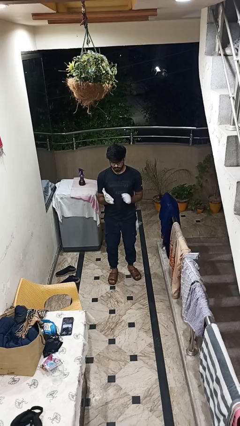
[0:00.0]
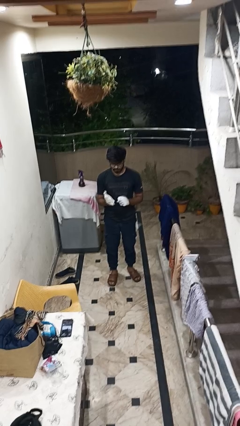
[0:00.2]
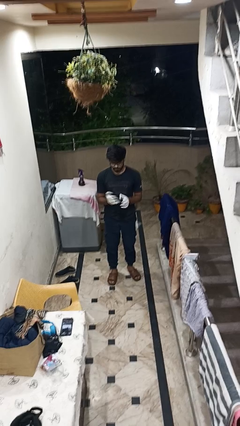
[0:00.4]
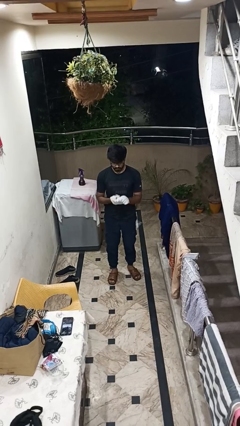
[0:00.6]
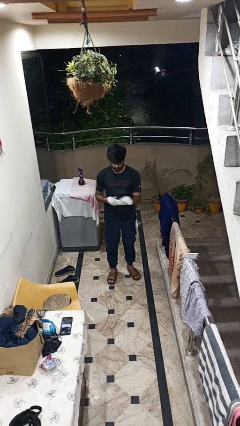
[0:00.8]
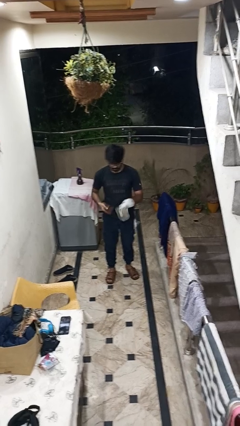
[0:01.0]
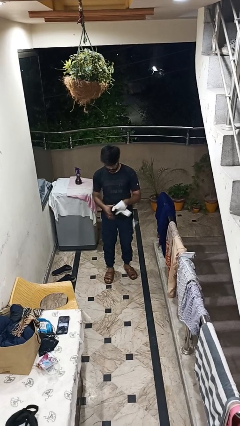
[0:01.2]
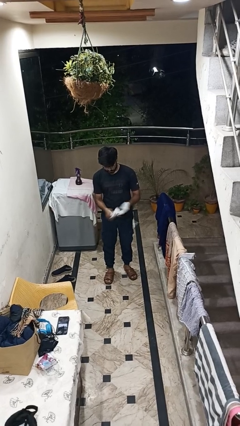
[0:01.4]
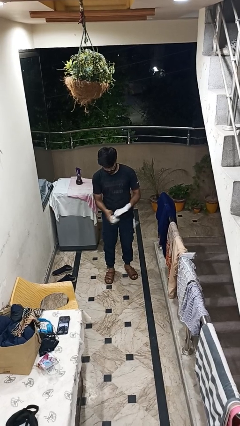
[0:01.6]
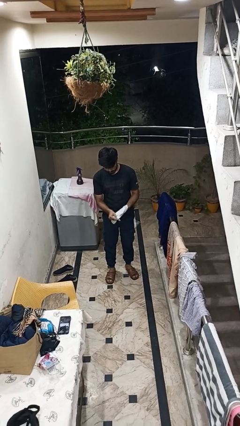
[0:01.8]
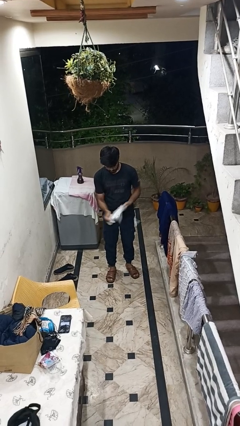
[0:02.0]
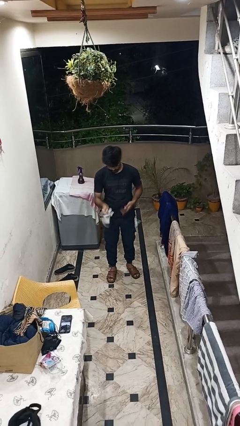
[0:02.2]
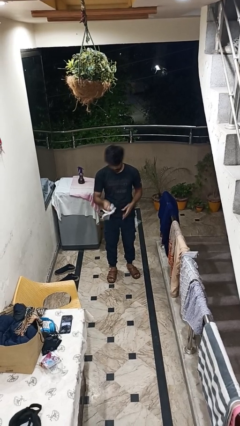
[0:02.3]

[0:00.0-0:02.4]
person takes off gloves

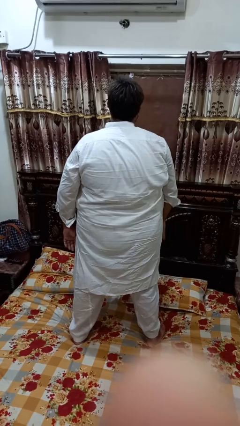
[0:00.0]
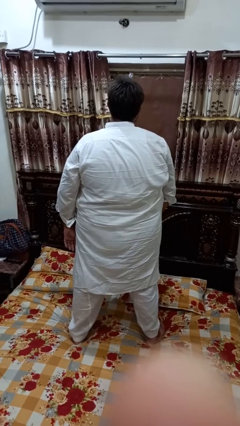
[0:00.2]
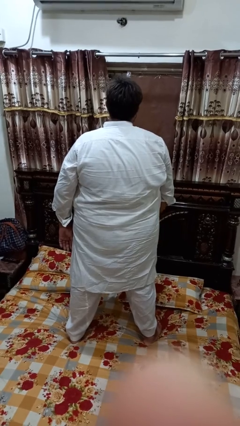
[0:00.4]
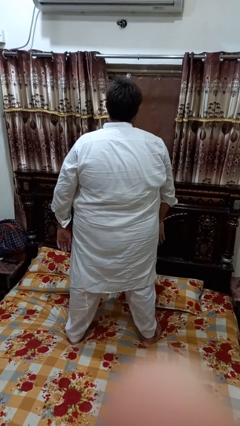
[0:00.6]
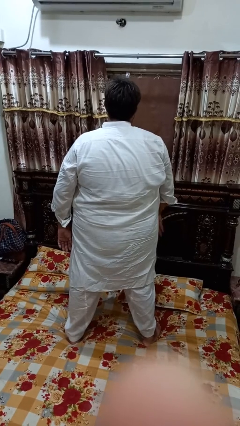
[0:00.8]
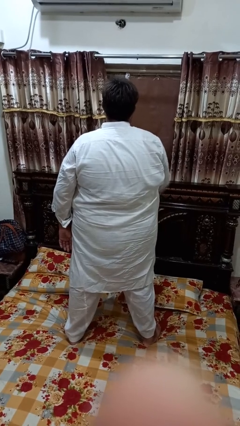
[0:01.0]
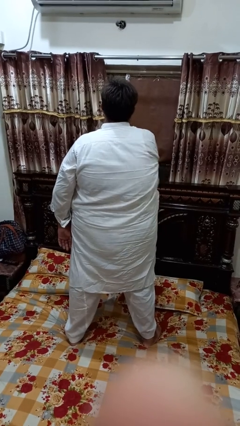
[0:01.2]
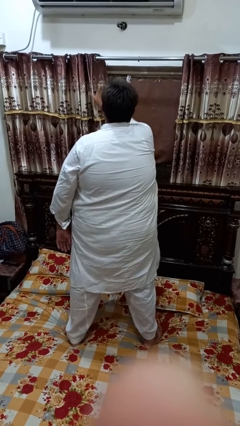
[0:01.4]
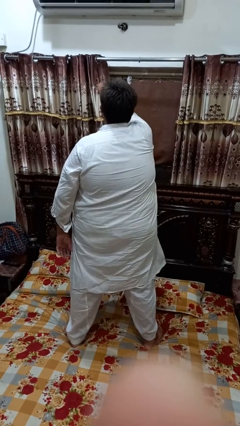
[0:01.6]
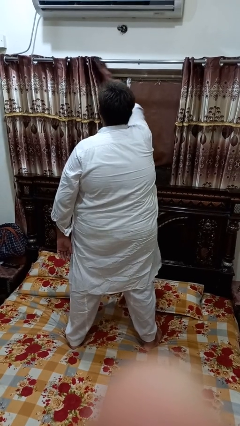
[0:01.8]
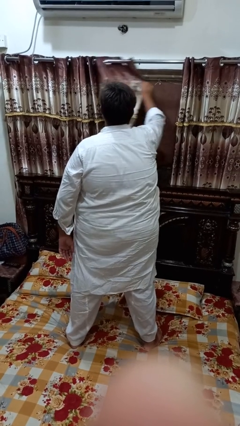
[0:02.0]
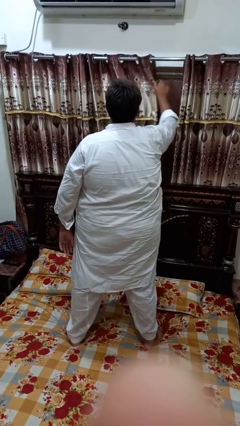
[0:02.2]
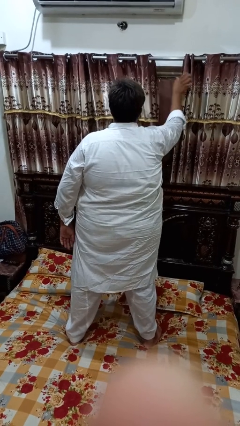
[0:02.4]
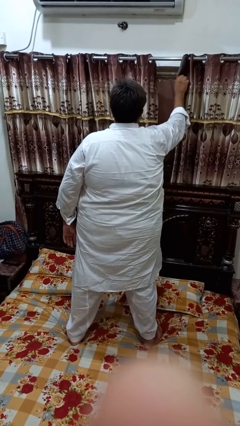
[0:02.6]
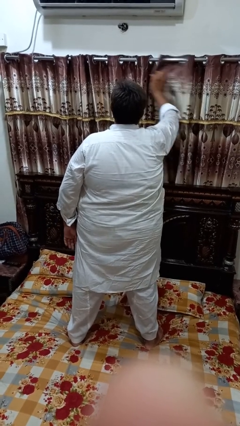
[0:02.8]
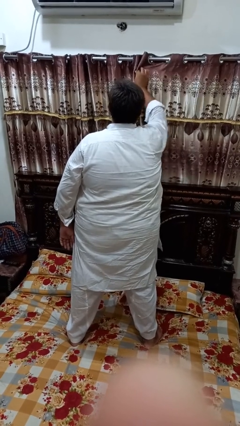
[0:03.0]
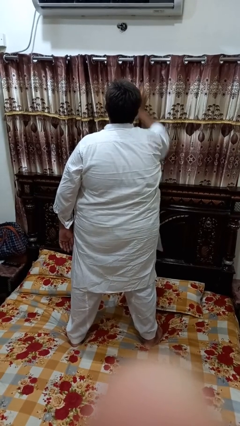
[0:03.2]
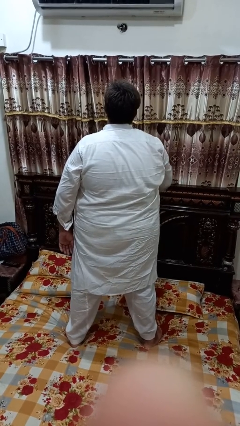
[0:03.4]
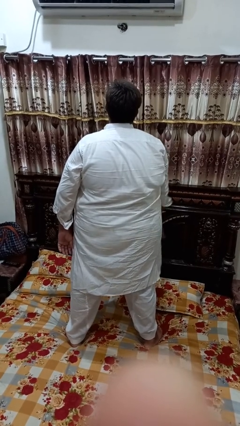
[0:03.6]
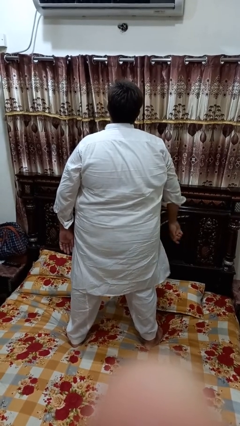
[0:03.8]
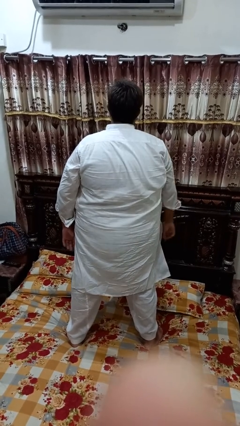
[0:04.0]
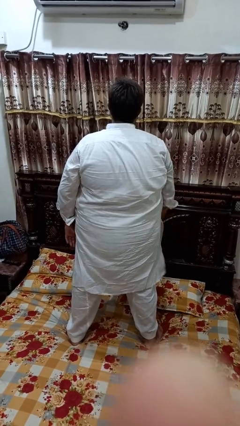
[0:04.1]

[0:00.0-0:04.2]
person closes curtains

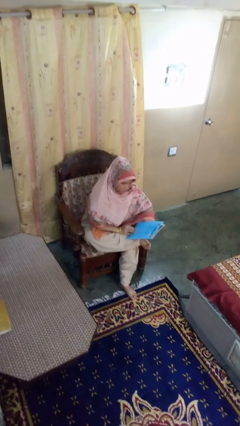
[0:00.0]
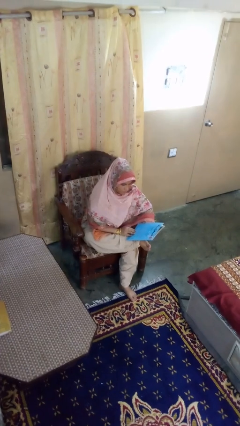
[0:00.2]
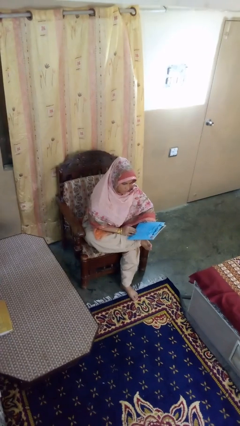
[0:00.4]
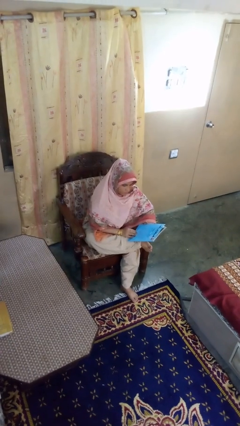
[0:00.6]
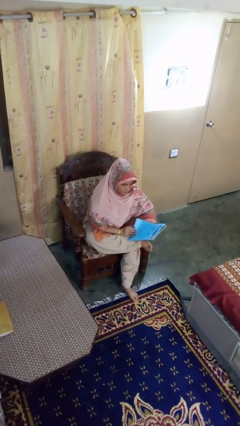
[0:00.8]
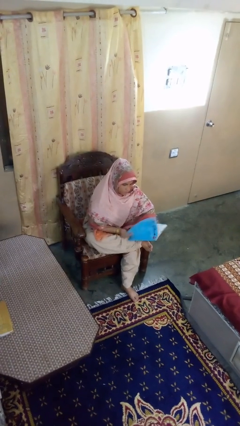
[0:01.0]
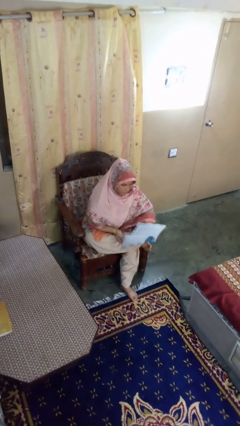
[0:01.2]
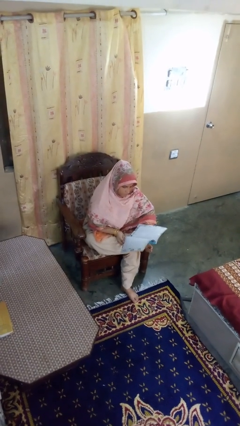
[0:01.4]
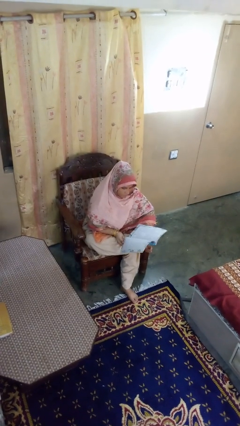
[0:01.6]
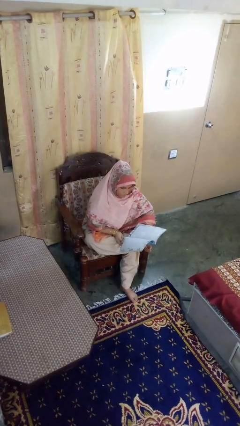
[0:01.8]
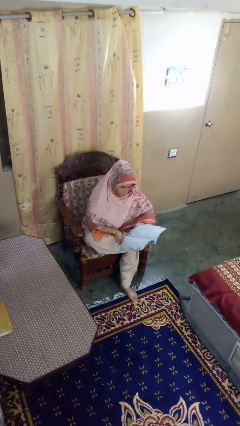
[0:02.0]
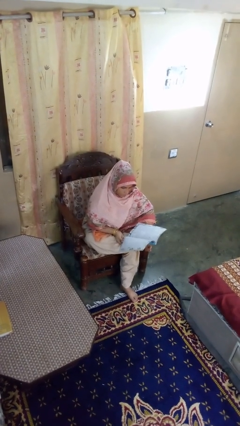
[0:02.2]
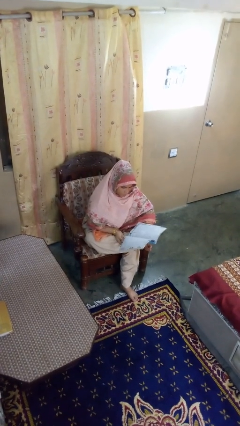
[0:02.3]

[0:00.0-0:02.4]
person reads magazine

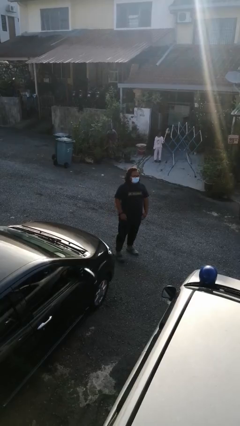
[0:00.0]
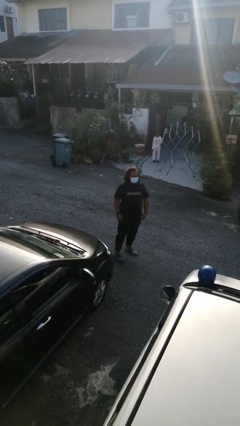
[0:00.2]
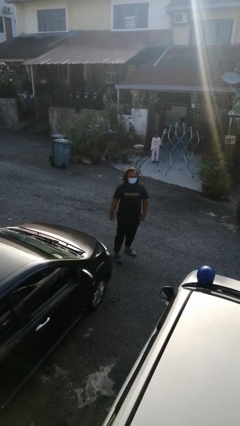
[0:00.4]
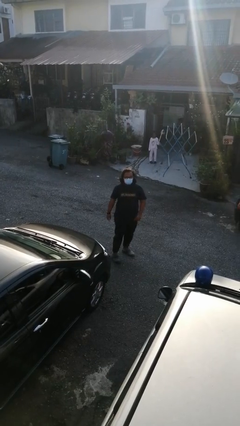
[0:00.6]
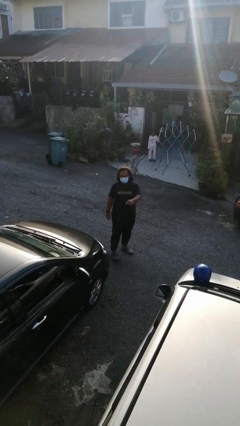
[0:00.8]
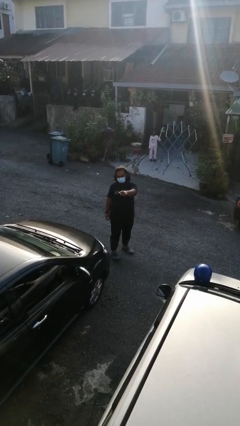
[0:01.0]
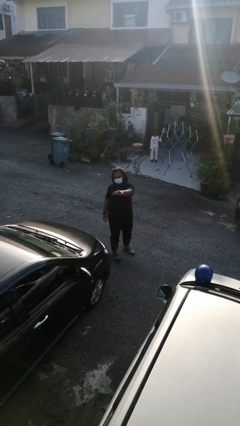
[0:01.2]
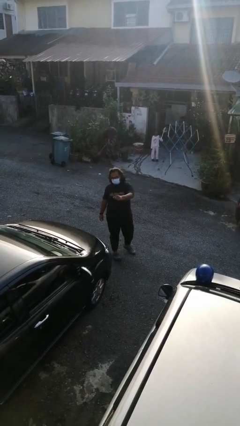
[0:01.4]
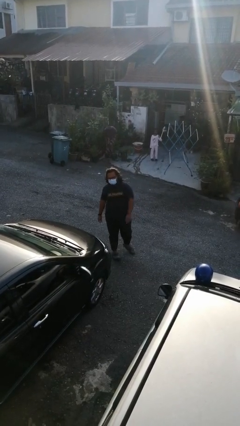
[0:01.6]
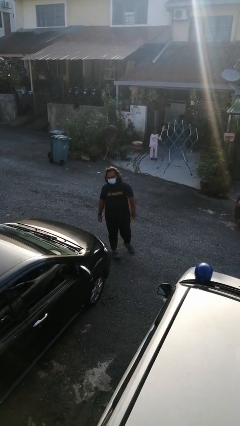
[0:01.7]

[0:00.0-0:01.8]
person points at person

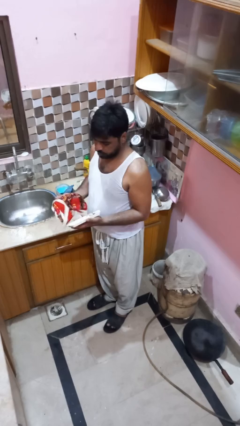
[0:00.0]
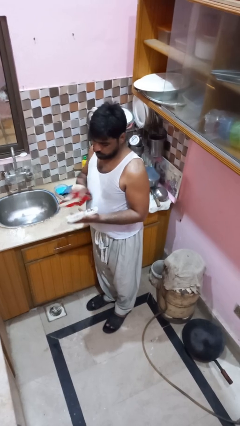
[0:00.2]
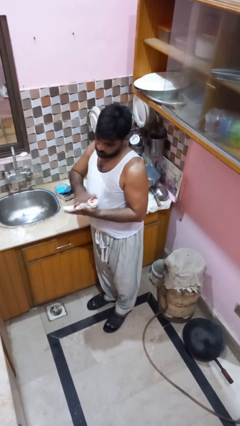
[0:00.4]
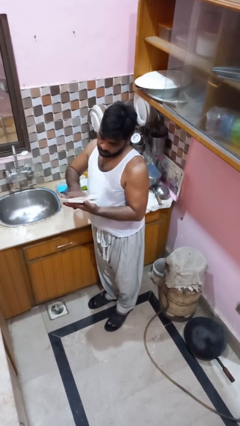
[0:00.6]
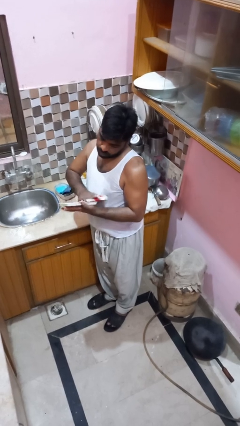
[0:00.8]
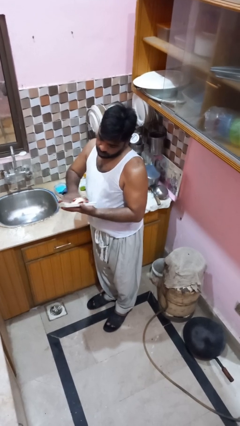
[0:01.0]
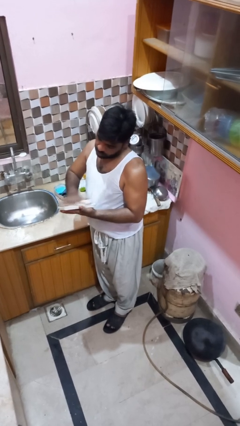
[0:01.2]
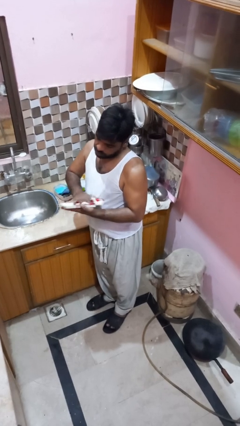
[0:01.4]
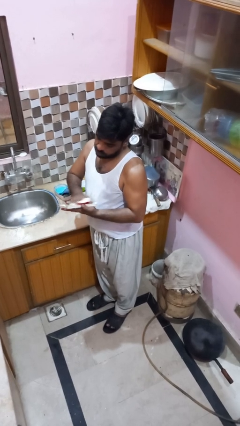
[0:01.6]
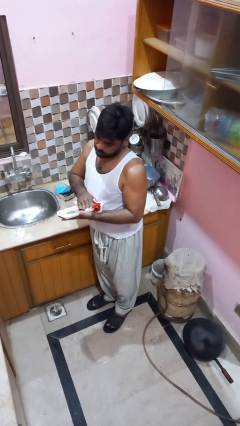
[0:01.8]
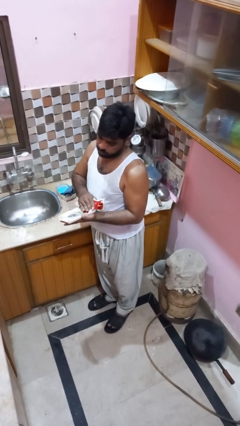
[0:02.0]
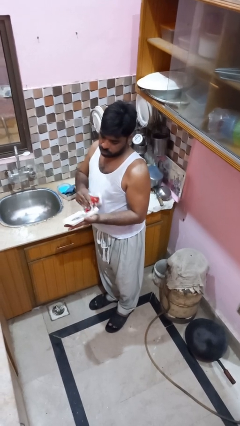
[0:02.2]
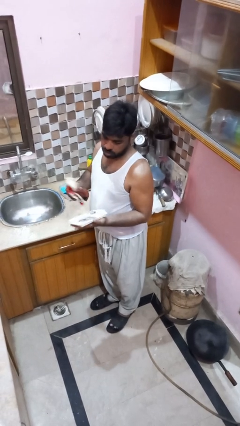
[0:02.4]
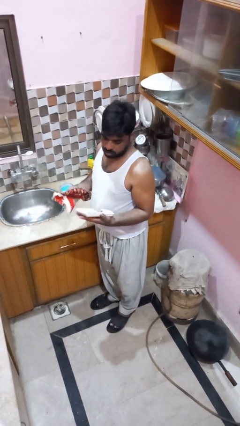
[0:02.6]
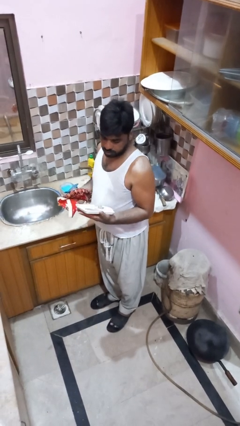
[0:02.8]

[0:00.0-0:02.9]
person dries dish

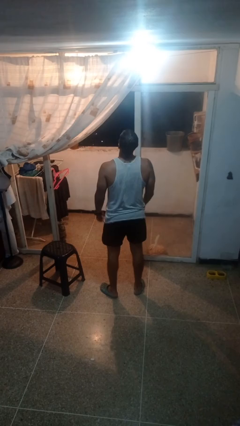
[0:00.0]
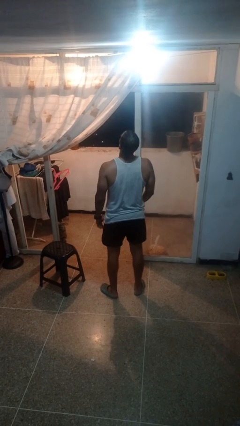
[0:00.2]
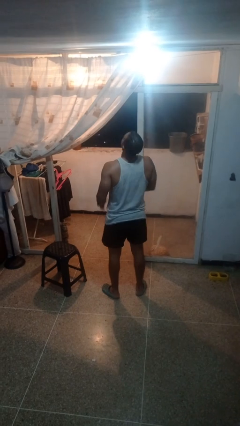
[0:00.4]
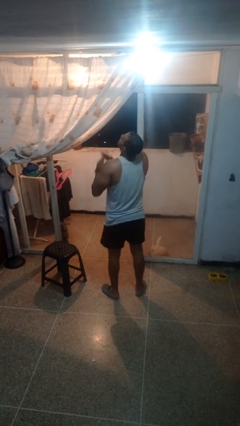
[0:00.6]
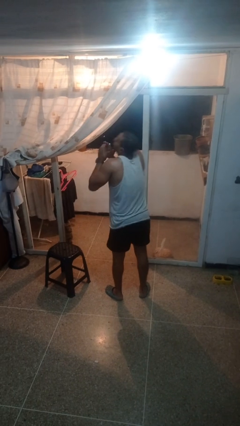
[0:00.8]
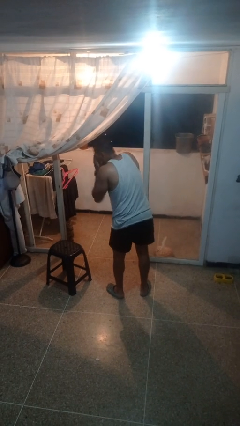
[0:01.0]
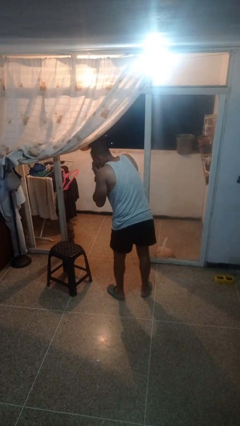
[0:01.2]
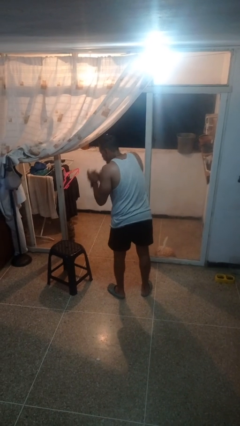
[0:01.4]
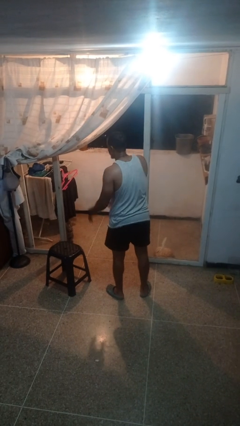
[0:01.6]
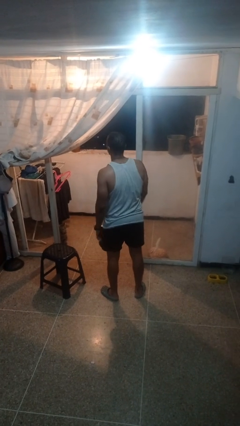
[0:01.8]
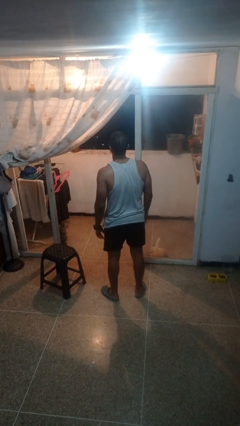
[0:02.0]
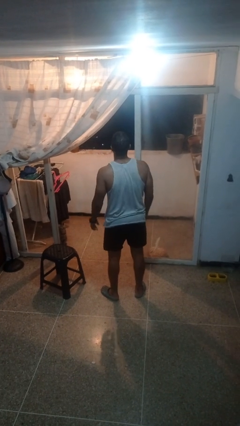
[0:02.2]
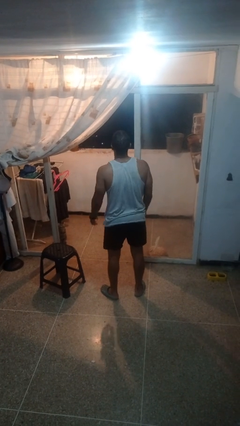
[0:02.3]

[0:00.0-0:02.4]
person sneezes into hand

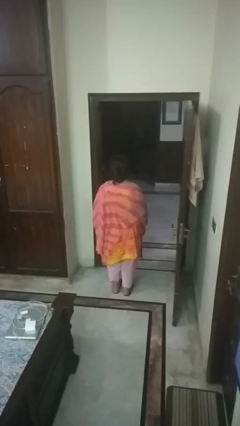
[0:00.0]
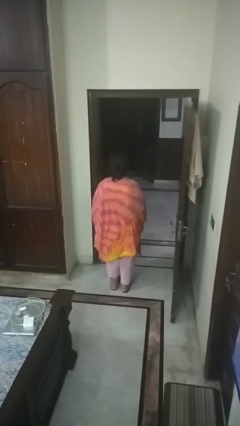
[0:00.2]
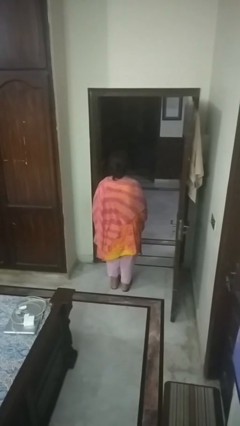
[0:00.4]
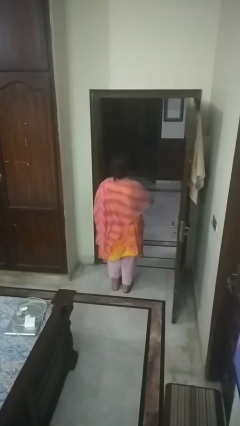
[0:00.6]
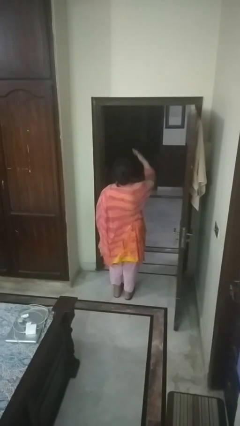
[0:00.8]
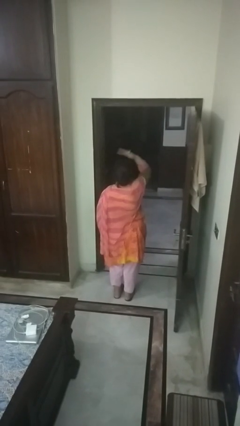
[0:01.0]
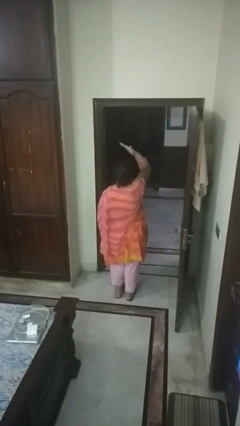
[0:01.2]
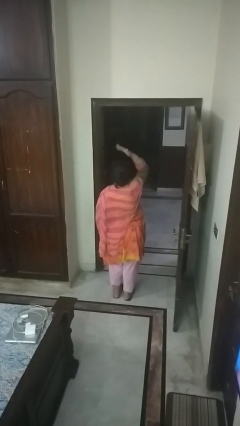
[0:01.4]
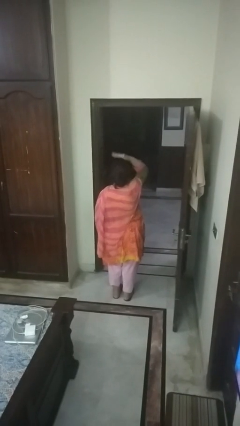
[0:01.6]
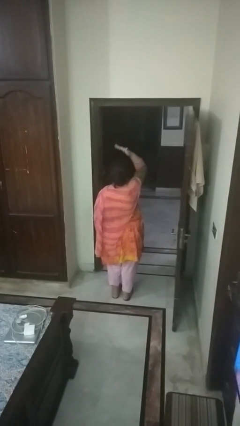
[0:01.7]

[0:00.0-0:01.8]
person pats head
